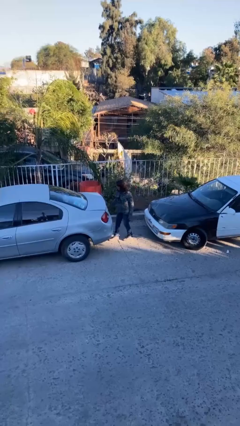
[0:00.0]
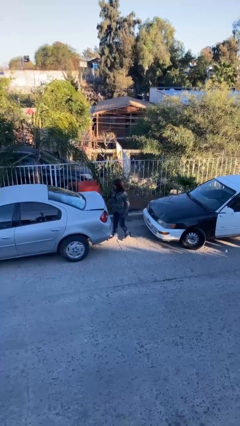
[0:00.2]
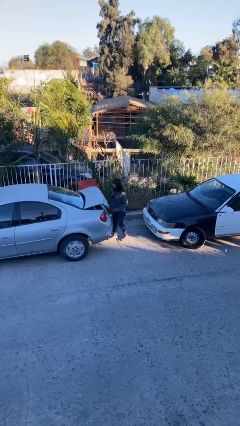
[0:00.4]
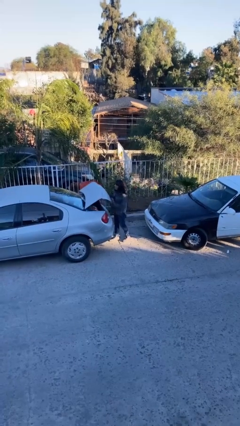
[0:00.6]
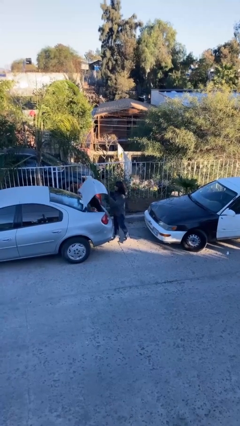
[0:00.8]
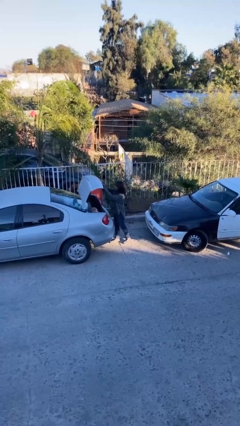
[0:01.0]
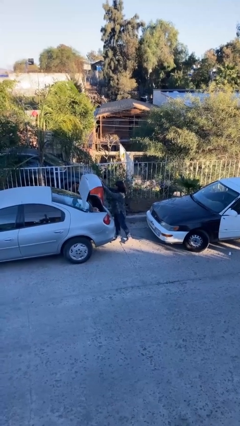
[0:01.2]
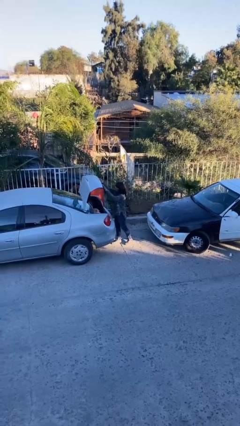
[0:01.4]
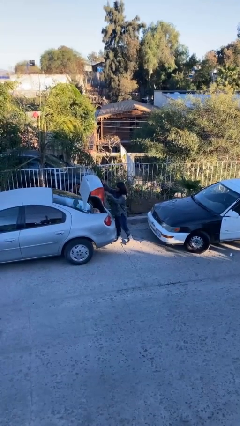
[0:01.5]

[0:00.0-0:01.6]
person opens car trunk

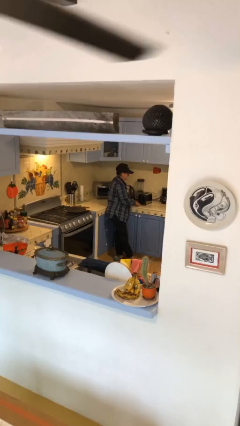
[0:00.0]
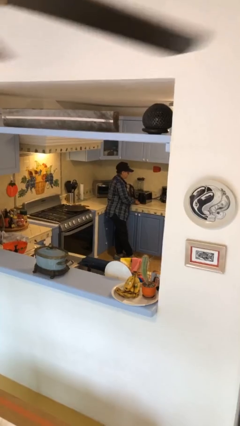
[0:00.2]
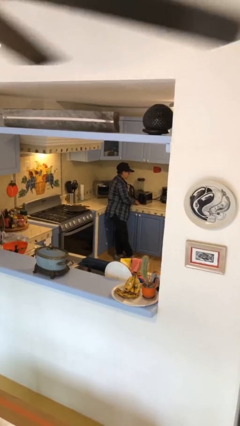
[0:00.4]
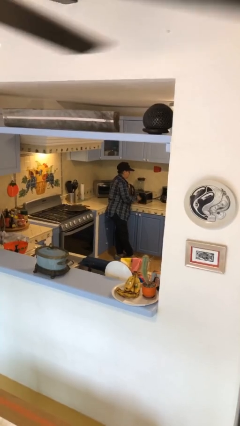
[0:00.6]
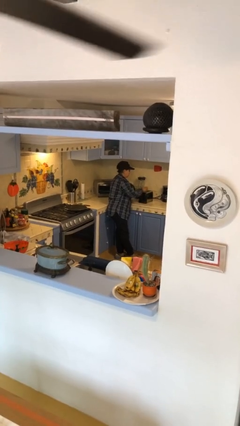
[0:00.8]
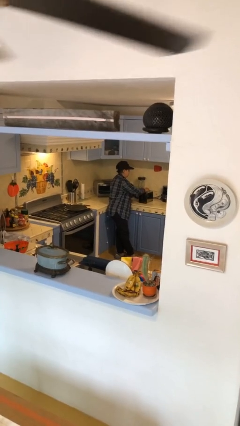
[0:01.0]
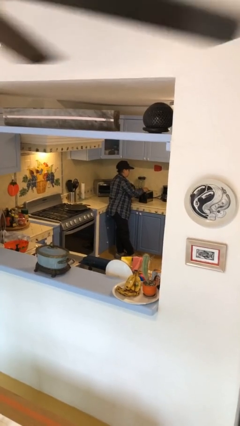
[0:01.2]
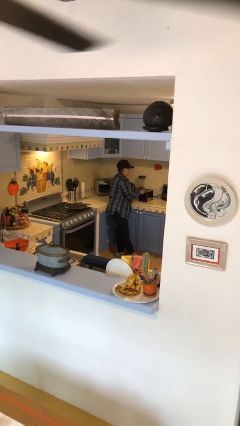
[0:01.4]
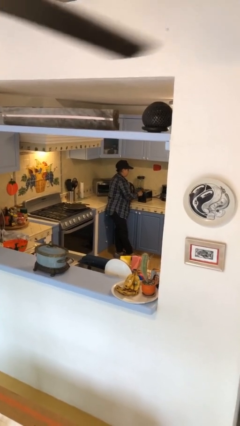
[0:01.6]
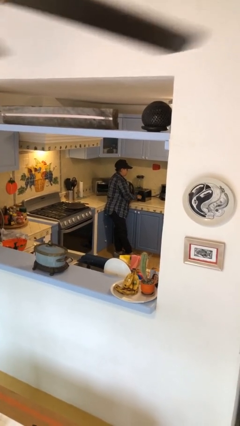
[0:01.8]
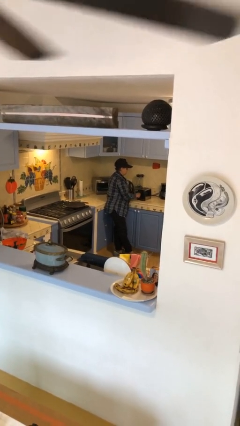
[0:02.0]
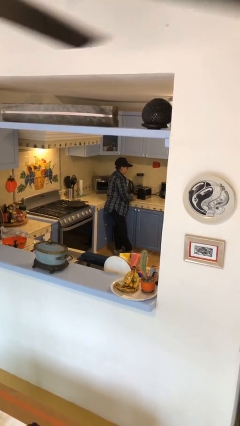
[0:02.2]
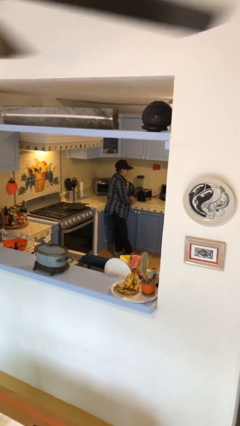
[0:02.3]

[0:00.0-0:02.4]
person puts object into toaster

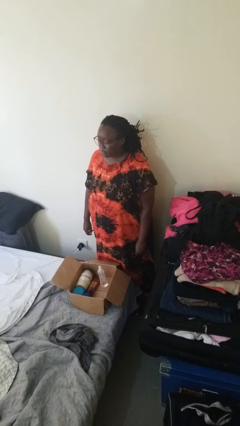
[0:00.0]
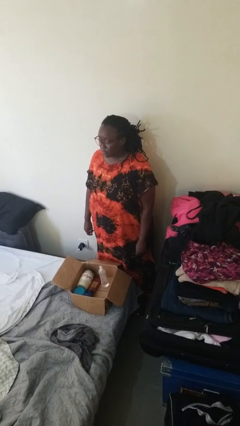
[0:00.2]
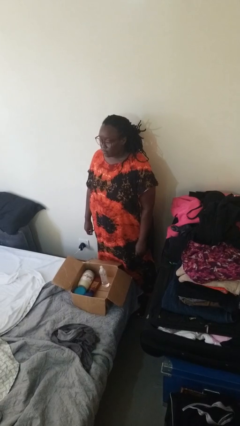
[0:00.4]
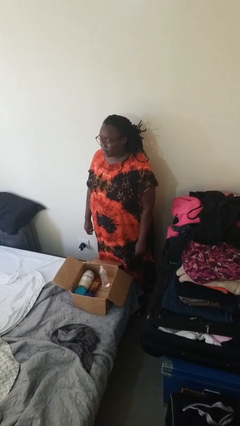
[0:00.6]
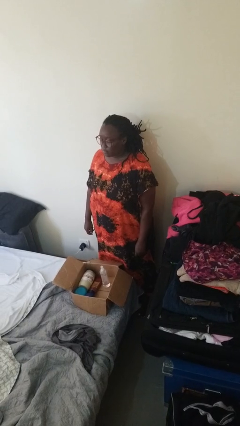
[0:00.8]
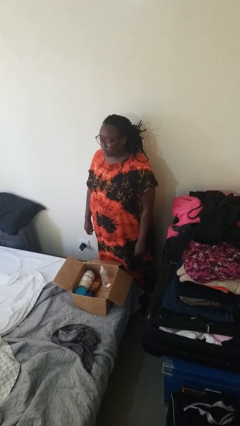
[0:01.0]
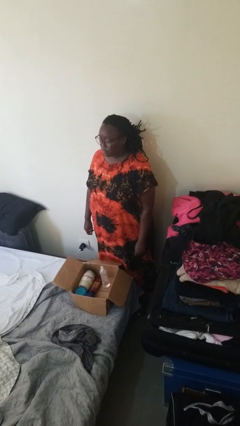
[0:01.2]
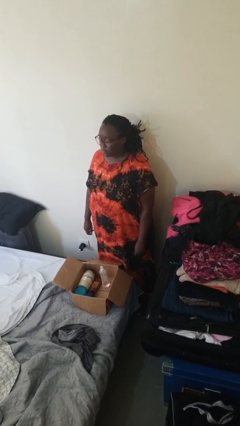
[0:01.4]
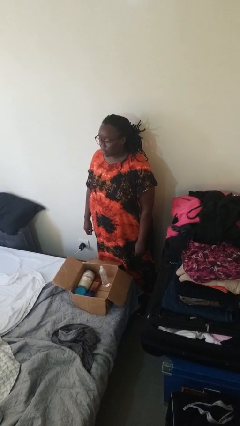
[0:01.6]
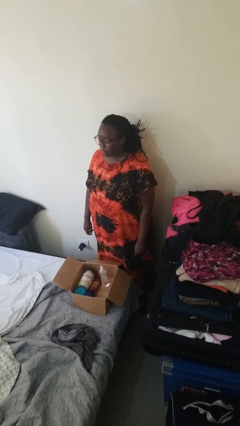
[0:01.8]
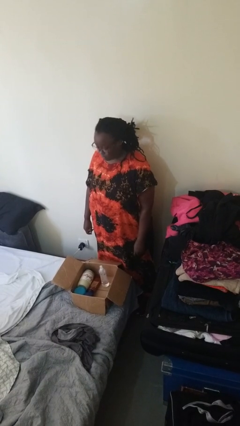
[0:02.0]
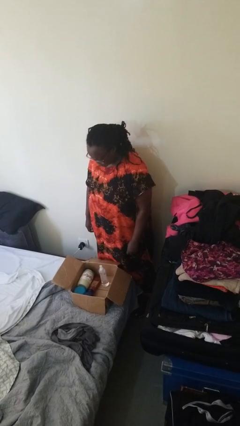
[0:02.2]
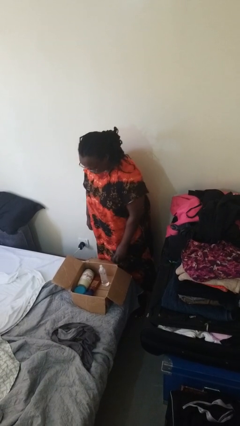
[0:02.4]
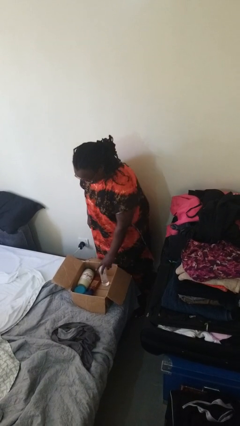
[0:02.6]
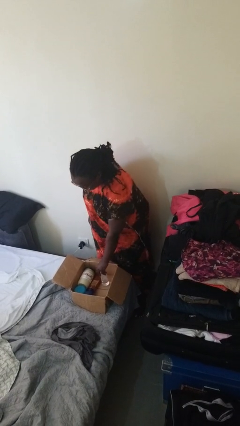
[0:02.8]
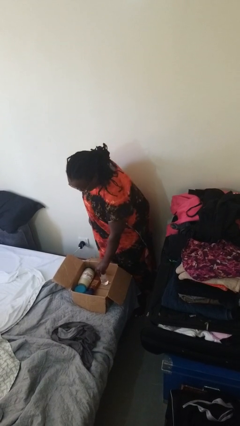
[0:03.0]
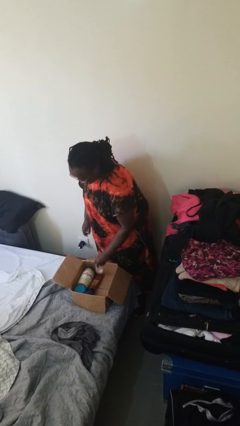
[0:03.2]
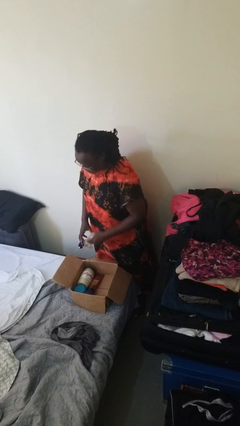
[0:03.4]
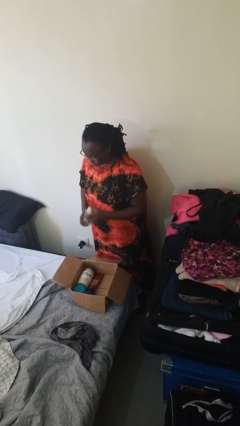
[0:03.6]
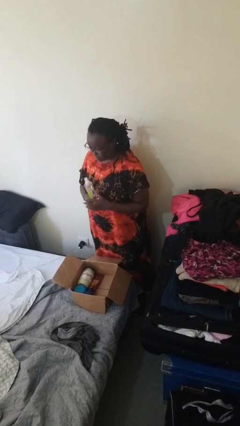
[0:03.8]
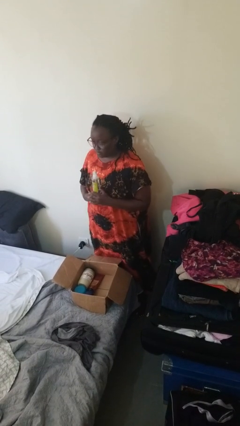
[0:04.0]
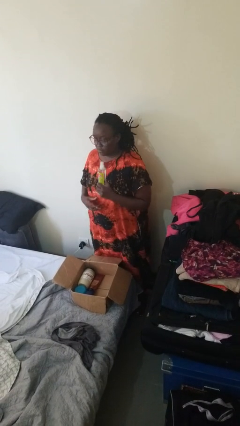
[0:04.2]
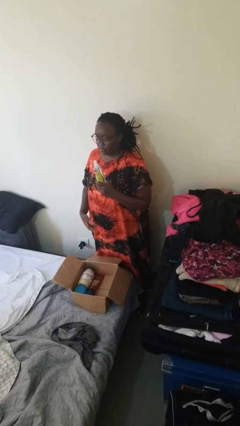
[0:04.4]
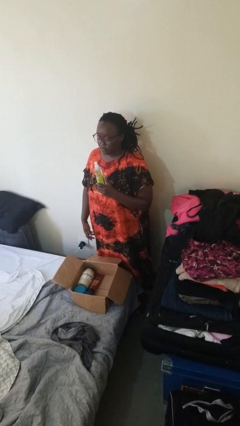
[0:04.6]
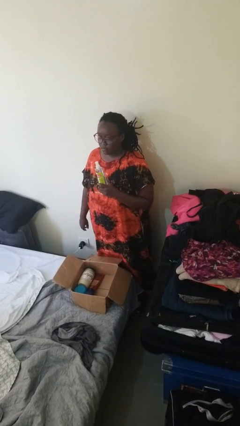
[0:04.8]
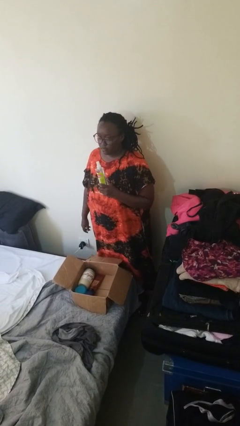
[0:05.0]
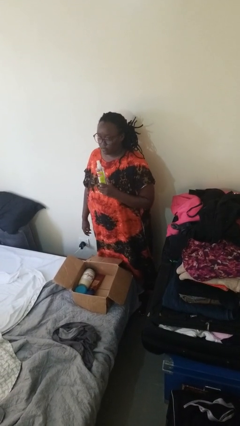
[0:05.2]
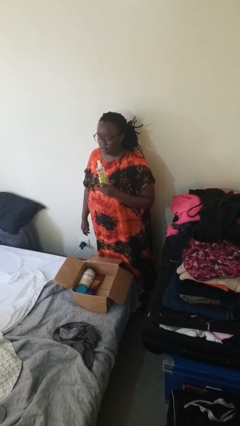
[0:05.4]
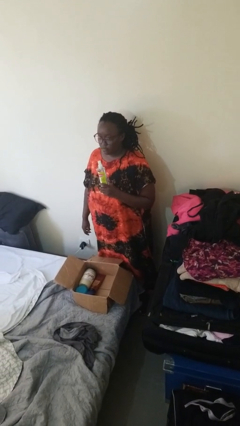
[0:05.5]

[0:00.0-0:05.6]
person takes object from box

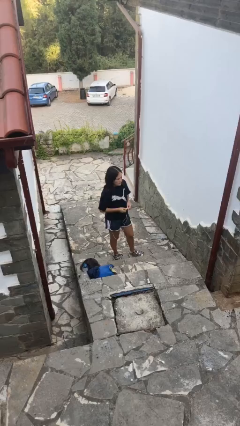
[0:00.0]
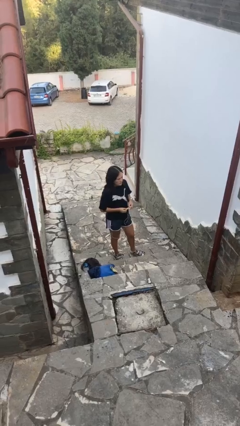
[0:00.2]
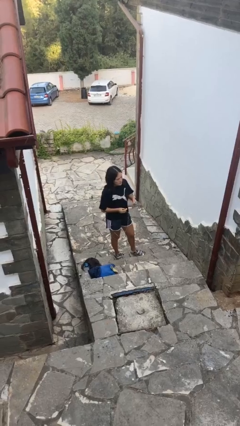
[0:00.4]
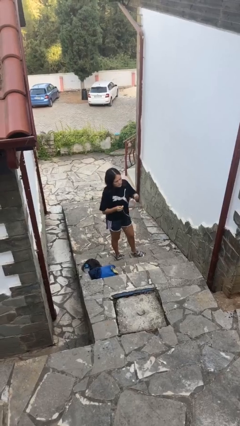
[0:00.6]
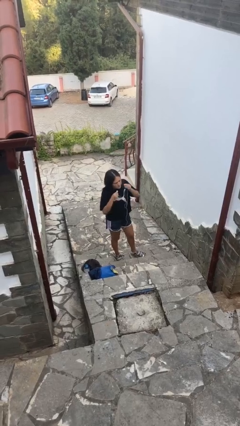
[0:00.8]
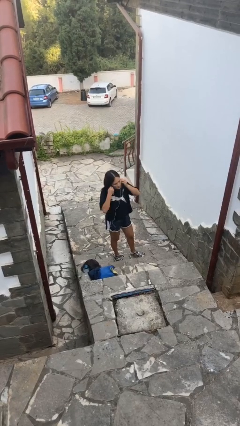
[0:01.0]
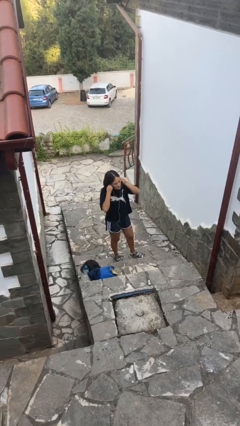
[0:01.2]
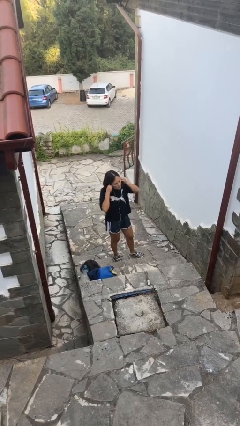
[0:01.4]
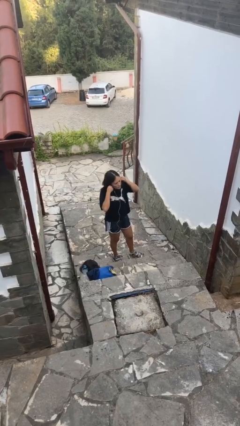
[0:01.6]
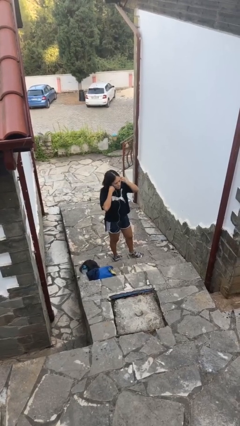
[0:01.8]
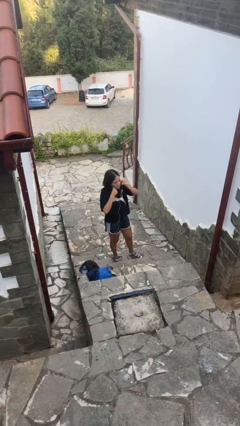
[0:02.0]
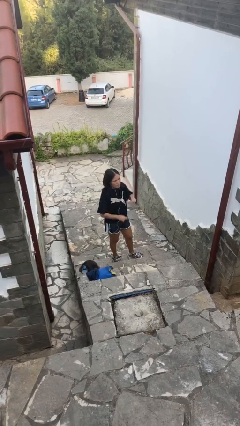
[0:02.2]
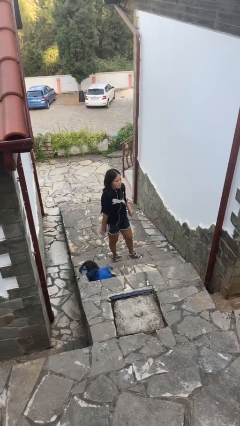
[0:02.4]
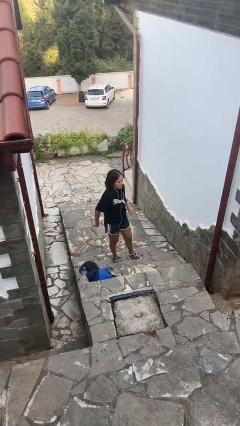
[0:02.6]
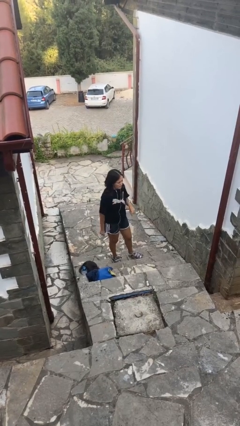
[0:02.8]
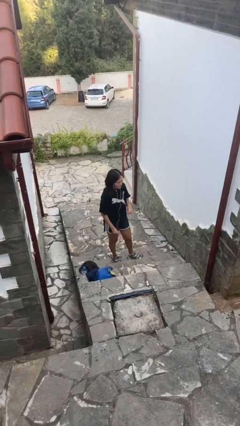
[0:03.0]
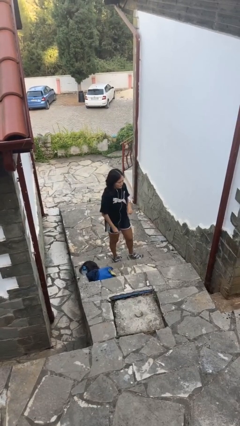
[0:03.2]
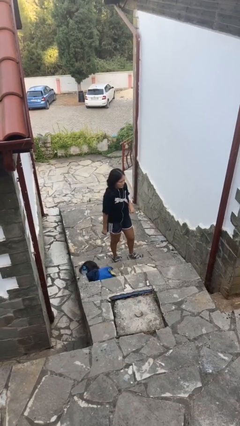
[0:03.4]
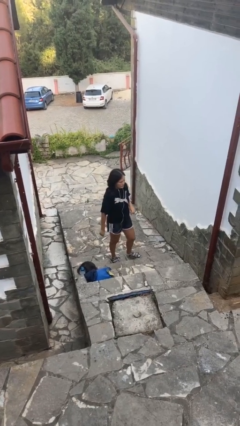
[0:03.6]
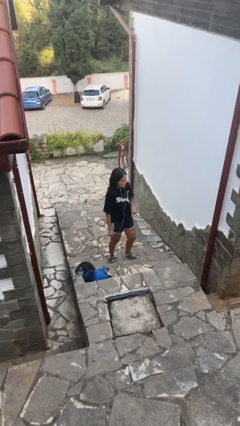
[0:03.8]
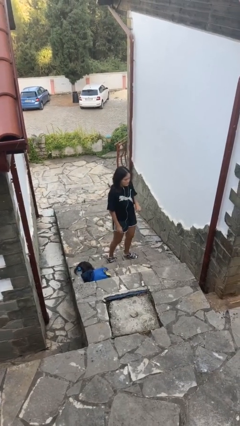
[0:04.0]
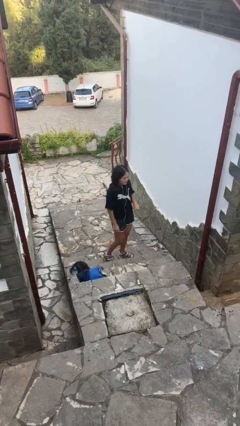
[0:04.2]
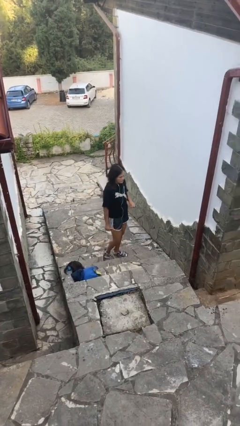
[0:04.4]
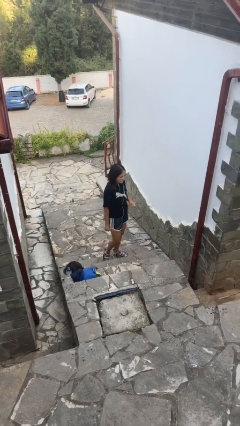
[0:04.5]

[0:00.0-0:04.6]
person puts on headphones

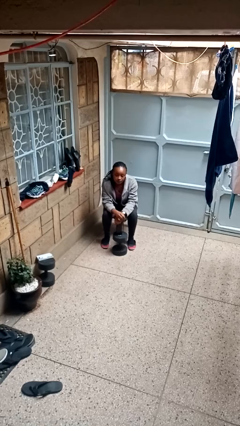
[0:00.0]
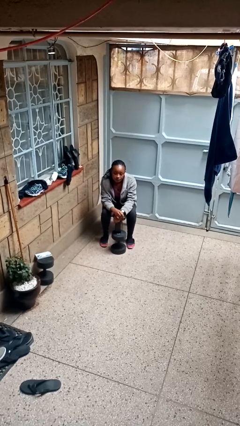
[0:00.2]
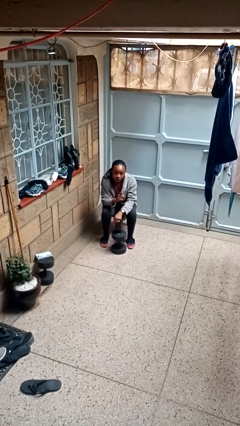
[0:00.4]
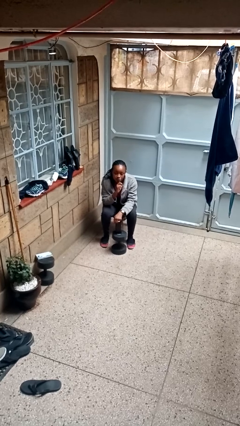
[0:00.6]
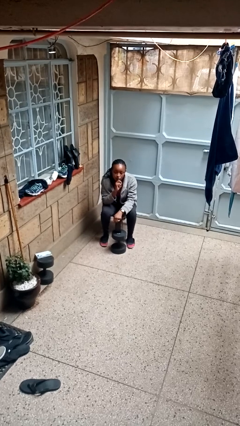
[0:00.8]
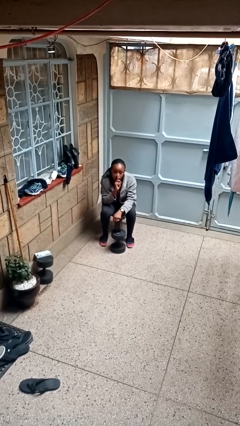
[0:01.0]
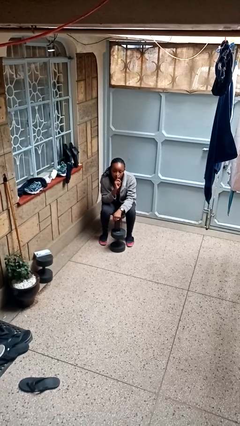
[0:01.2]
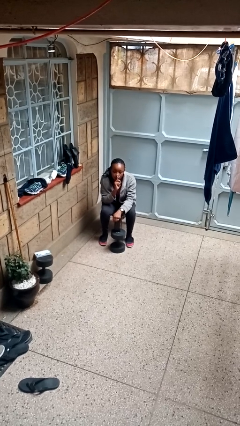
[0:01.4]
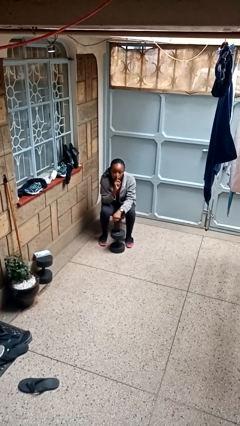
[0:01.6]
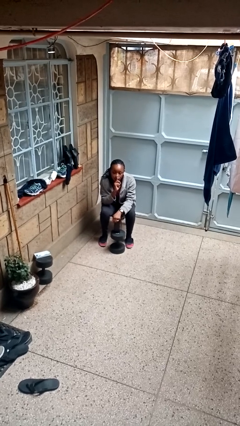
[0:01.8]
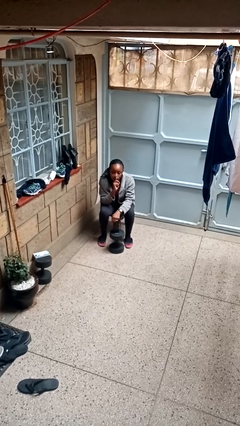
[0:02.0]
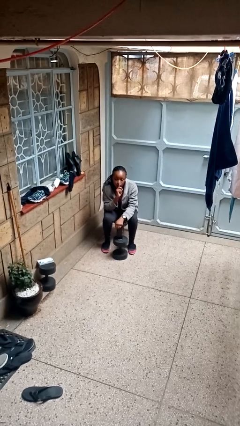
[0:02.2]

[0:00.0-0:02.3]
person gestures be quiet

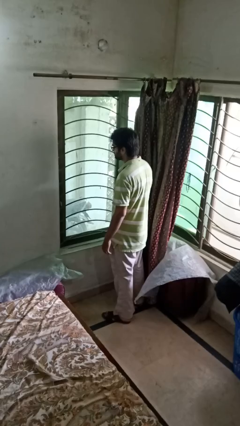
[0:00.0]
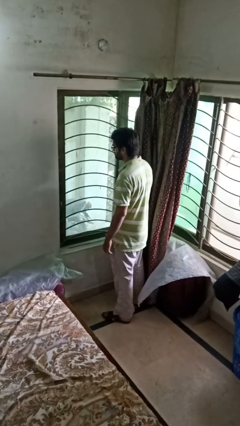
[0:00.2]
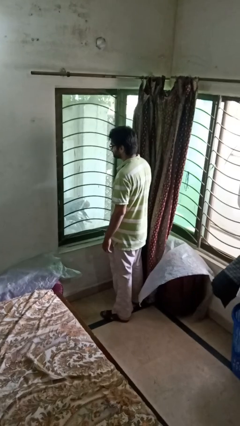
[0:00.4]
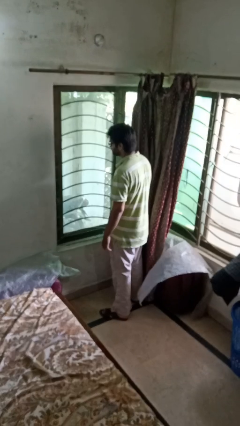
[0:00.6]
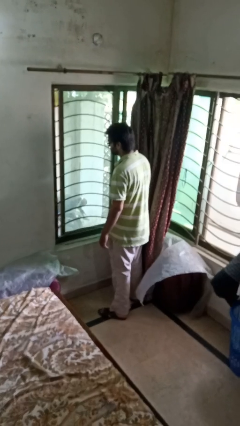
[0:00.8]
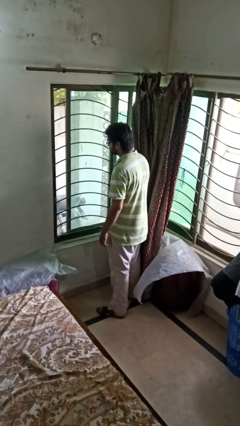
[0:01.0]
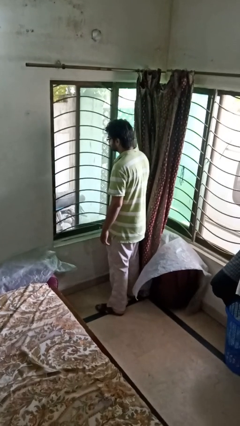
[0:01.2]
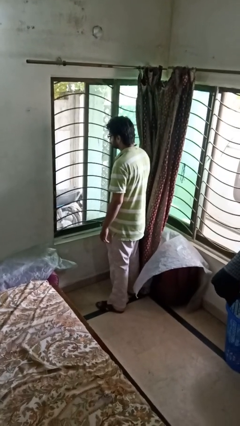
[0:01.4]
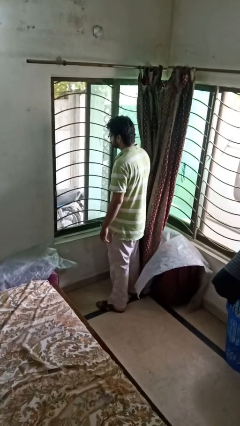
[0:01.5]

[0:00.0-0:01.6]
person opens home window
